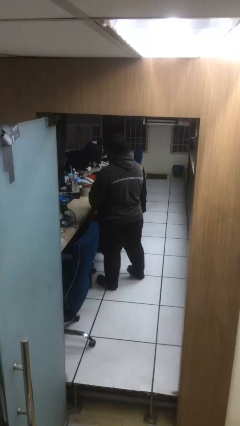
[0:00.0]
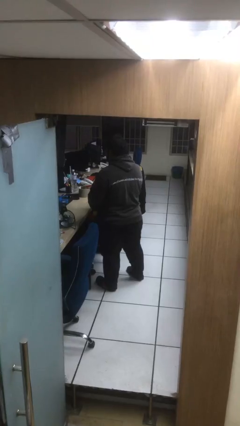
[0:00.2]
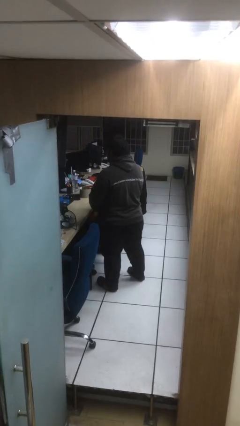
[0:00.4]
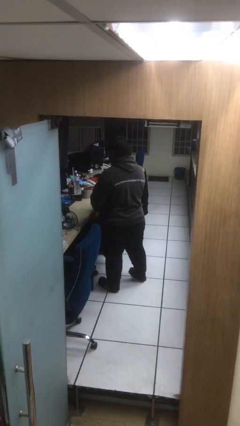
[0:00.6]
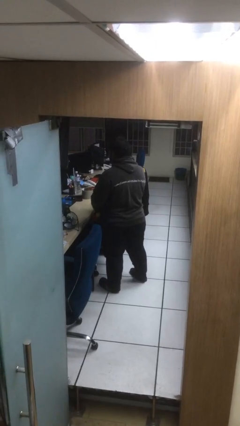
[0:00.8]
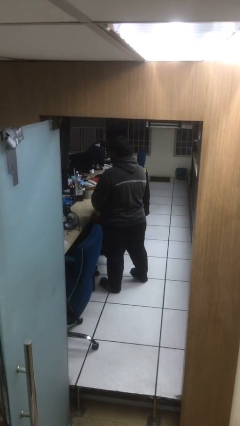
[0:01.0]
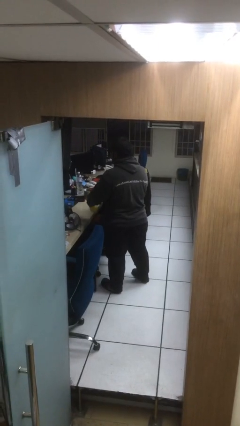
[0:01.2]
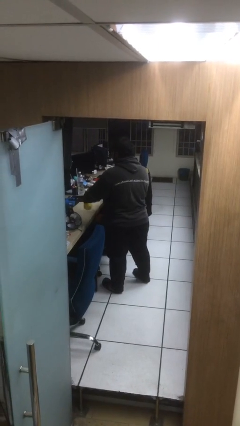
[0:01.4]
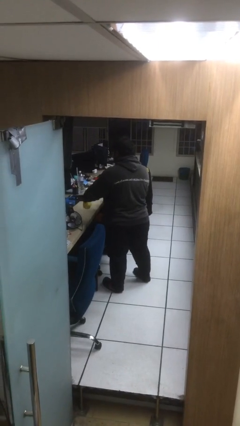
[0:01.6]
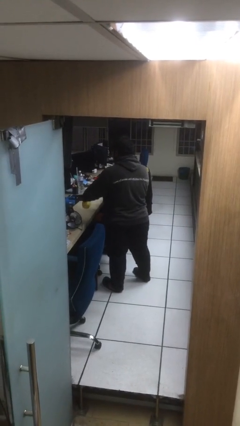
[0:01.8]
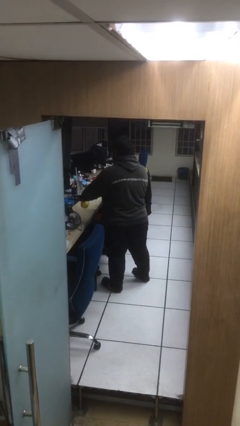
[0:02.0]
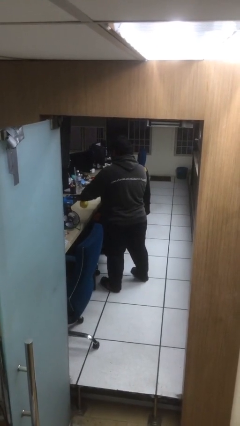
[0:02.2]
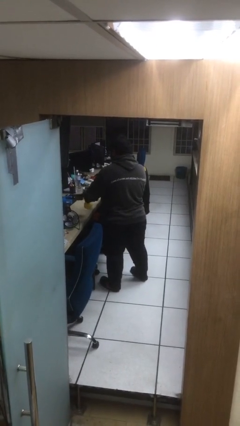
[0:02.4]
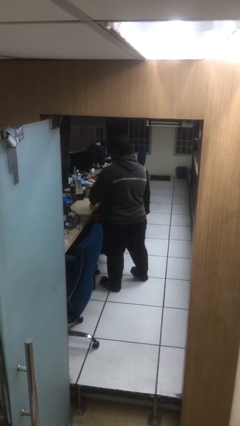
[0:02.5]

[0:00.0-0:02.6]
person sprays from bottle

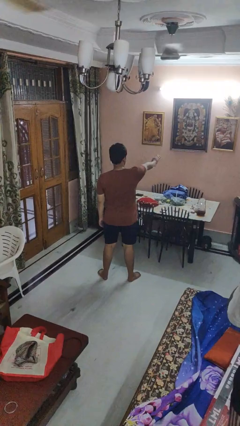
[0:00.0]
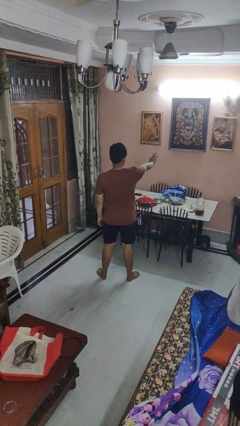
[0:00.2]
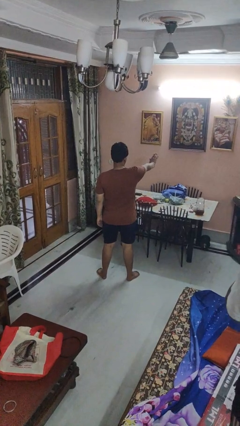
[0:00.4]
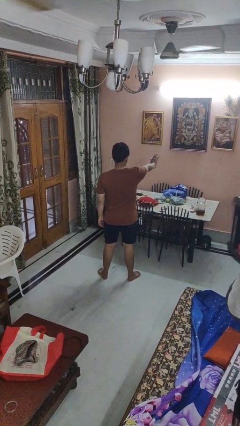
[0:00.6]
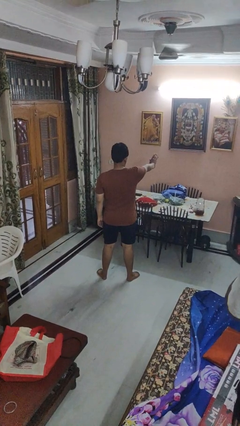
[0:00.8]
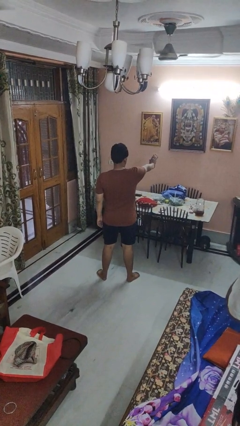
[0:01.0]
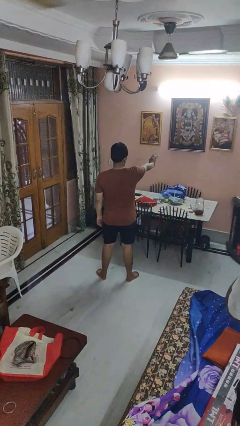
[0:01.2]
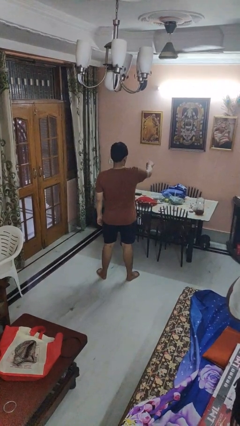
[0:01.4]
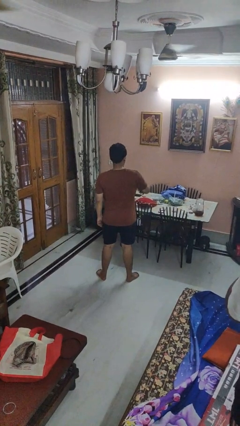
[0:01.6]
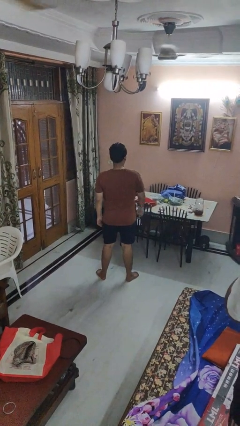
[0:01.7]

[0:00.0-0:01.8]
person gestures stop

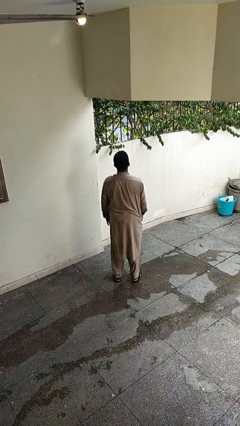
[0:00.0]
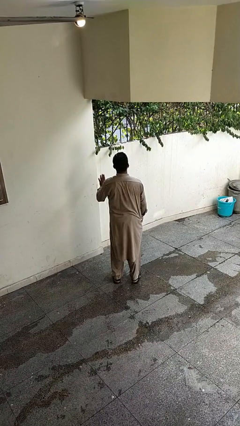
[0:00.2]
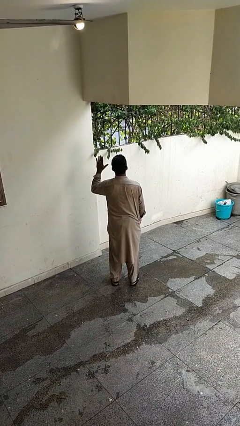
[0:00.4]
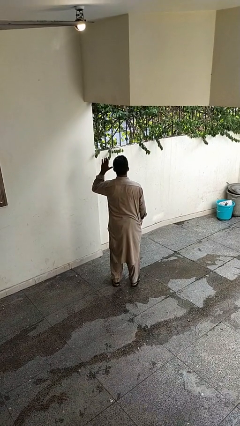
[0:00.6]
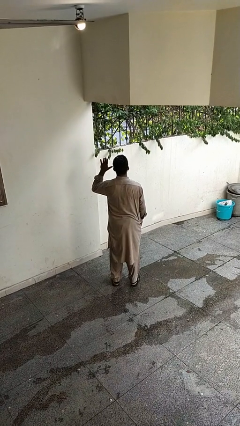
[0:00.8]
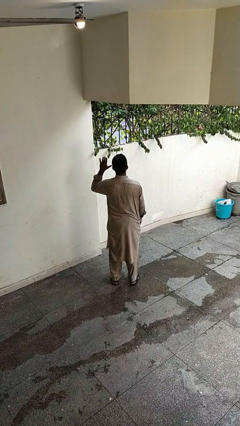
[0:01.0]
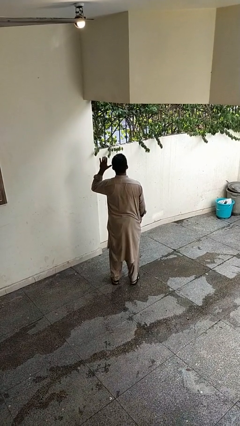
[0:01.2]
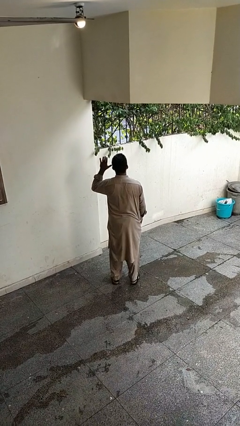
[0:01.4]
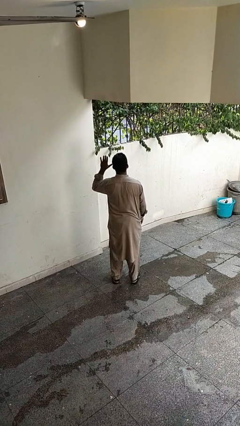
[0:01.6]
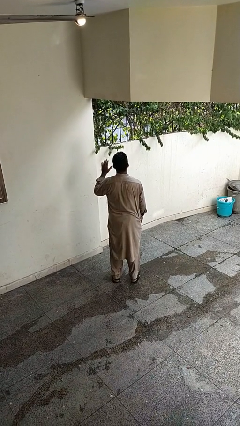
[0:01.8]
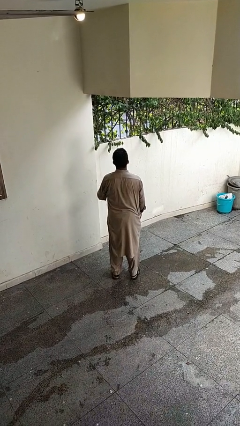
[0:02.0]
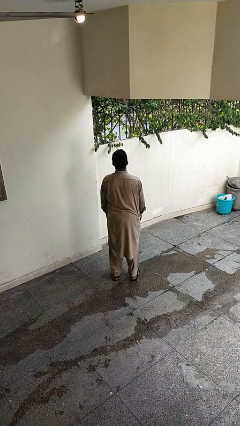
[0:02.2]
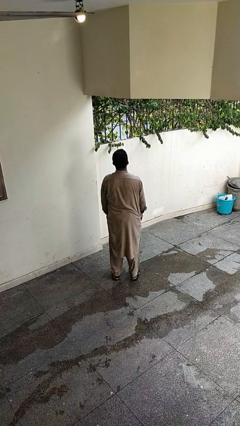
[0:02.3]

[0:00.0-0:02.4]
person gestures number five

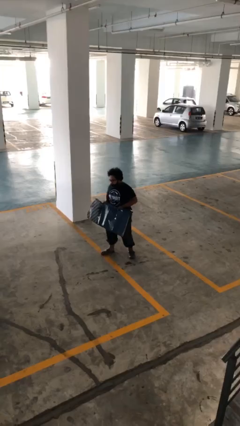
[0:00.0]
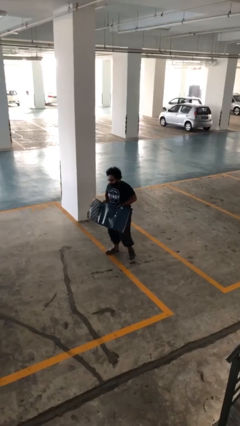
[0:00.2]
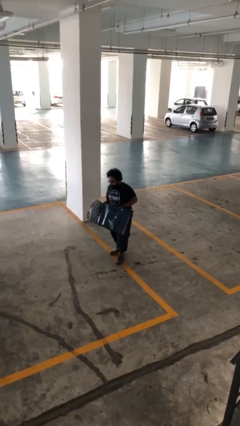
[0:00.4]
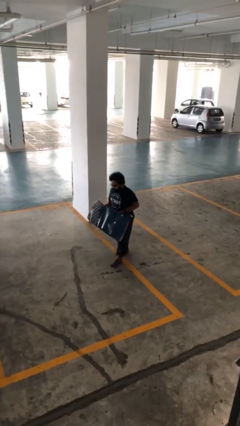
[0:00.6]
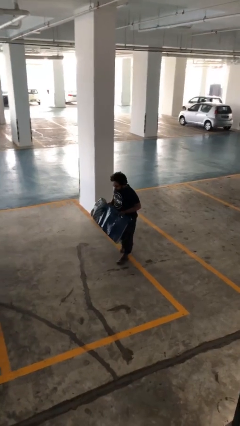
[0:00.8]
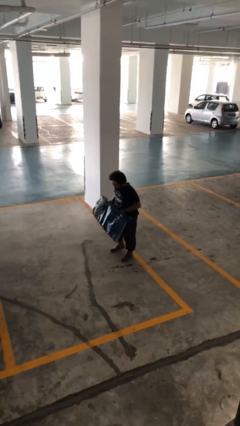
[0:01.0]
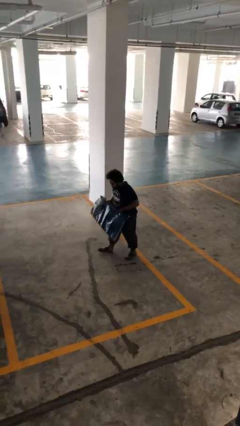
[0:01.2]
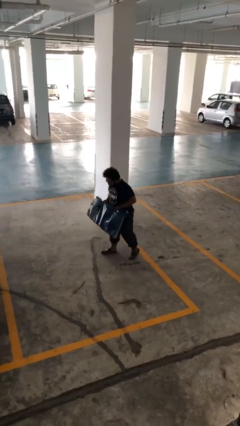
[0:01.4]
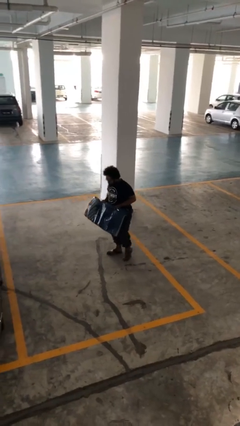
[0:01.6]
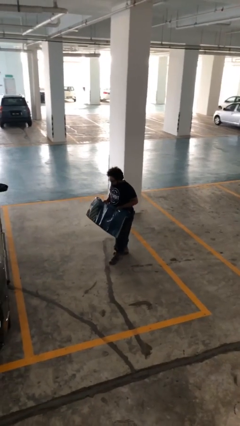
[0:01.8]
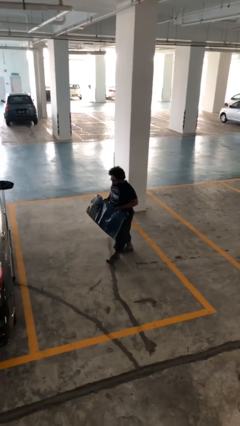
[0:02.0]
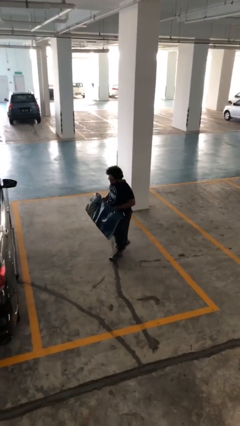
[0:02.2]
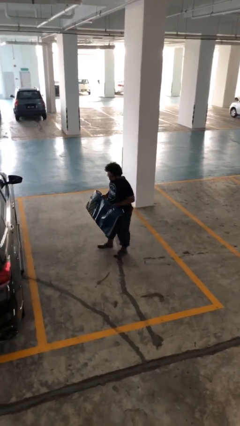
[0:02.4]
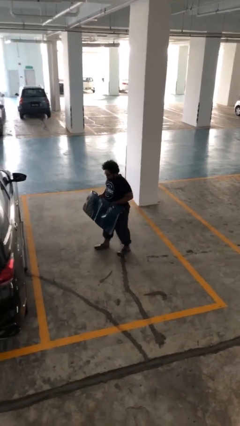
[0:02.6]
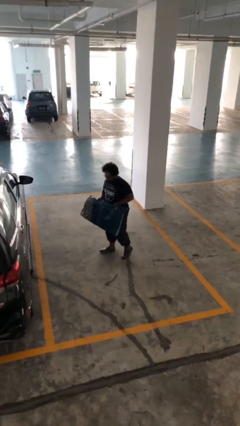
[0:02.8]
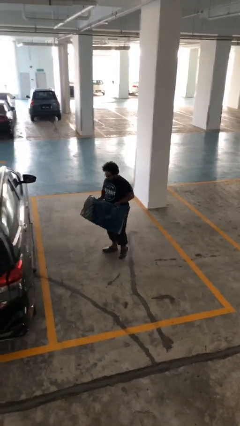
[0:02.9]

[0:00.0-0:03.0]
person carries heavy object

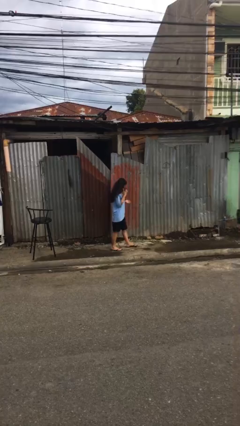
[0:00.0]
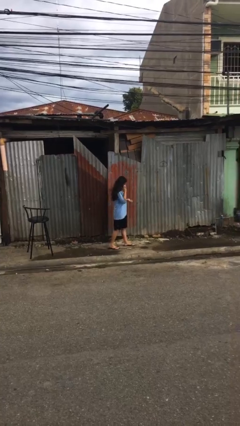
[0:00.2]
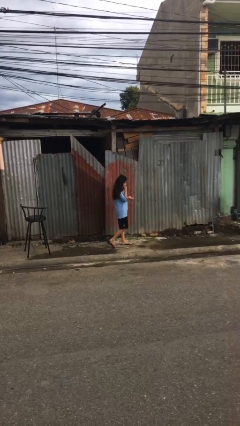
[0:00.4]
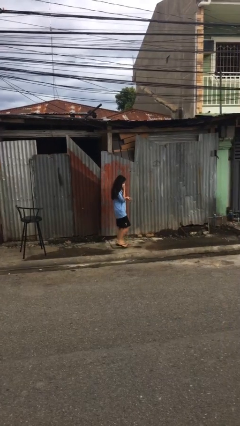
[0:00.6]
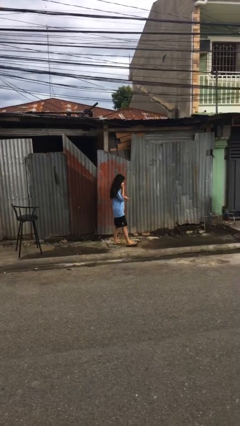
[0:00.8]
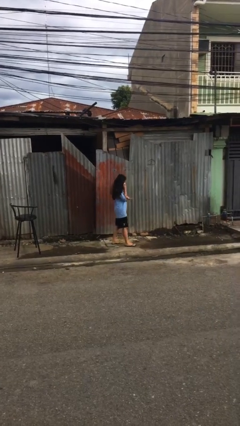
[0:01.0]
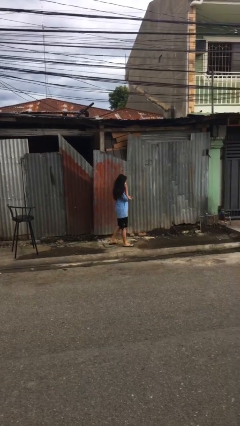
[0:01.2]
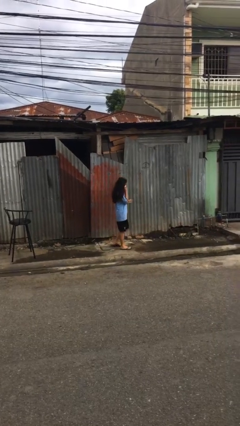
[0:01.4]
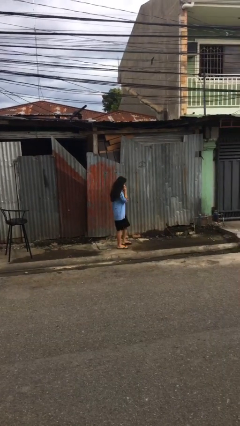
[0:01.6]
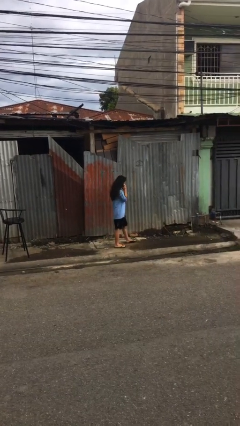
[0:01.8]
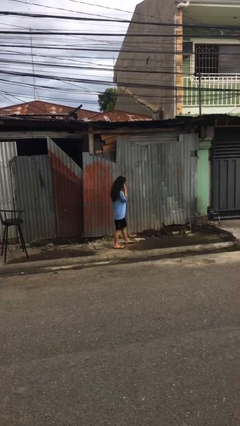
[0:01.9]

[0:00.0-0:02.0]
person talks on phone

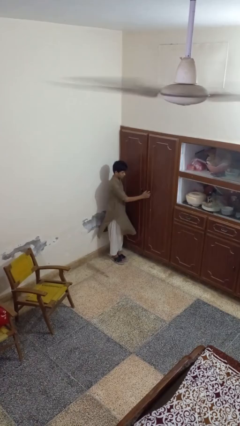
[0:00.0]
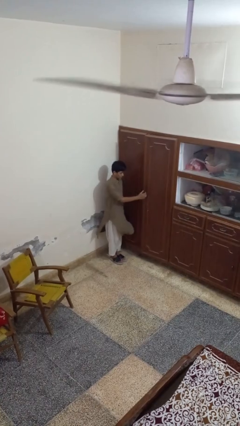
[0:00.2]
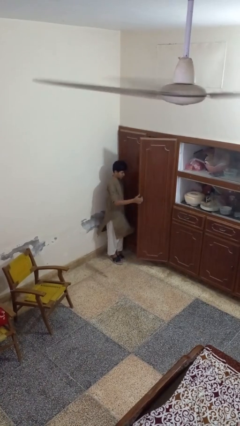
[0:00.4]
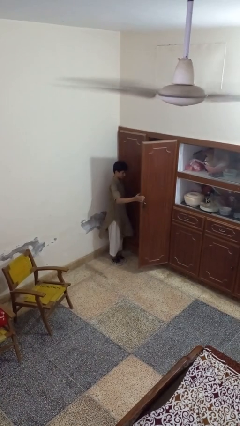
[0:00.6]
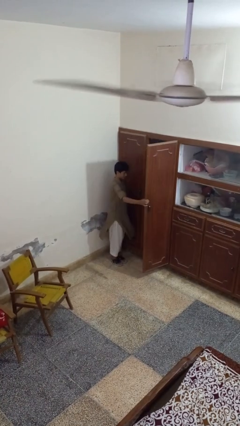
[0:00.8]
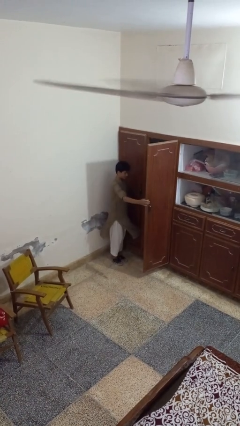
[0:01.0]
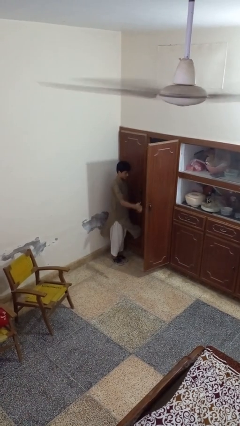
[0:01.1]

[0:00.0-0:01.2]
person opens closet door

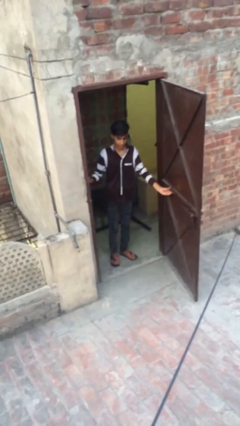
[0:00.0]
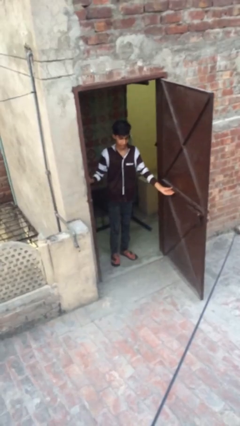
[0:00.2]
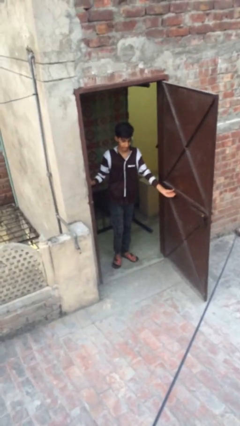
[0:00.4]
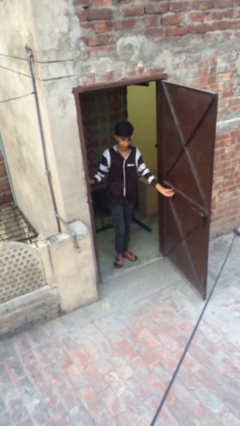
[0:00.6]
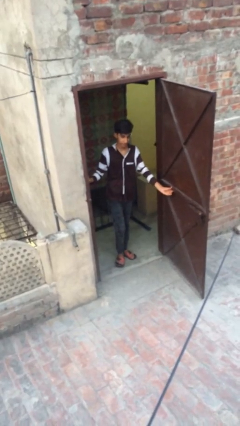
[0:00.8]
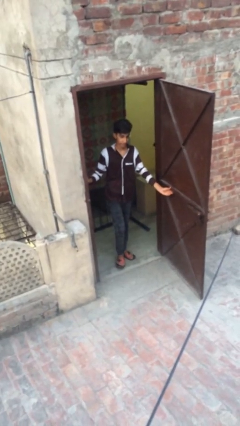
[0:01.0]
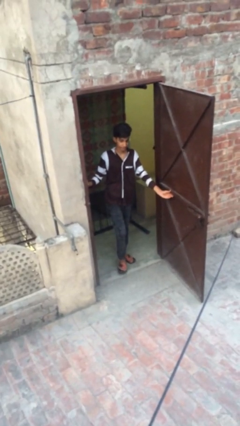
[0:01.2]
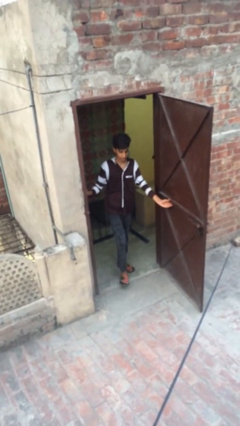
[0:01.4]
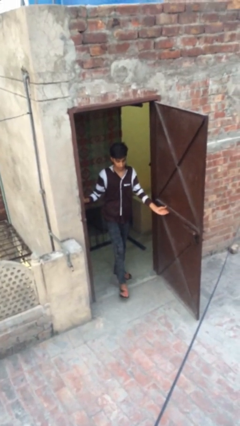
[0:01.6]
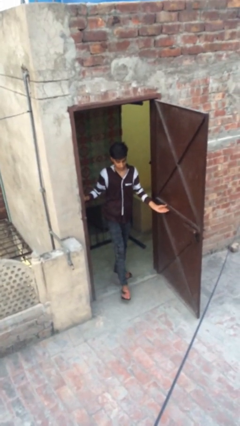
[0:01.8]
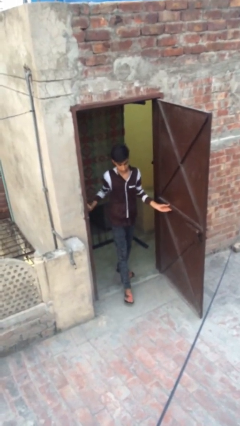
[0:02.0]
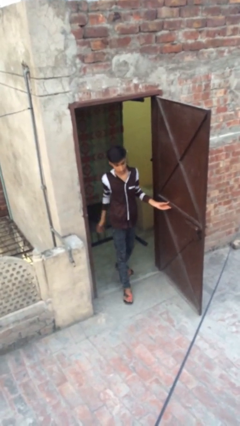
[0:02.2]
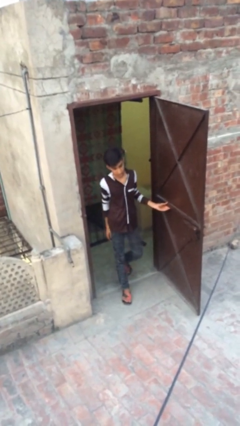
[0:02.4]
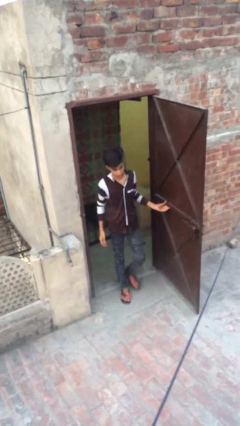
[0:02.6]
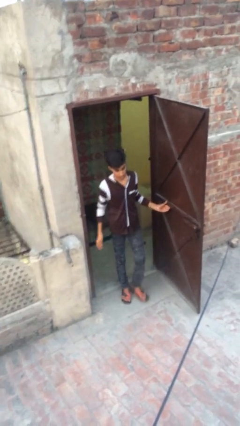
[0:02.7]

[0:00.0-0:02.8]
person opens facility door

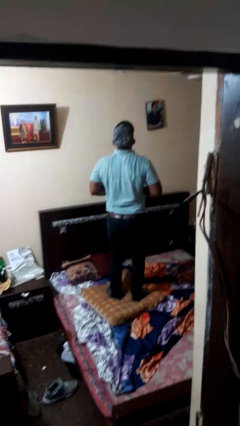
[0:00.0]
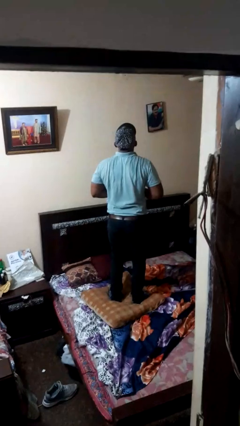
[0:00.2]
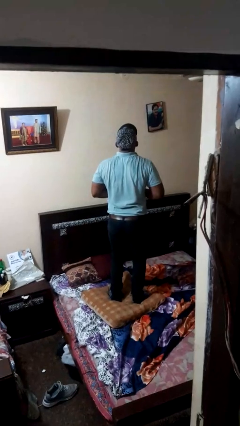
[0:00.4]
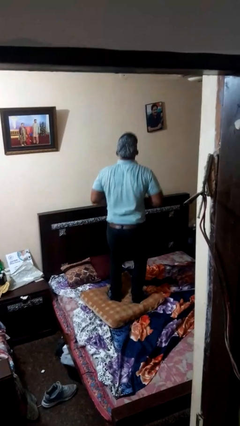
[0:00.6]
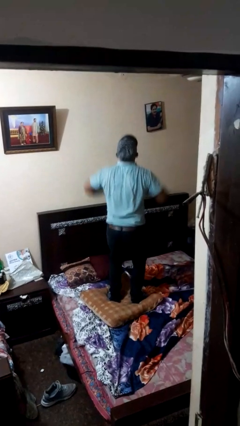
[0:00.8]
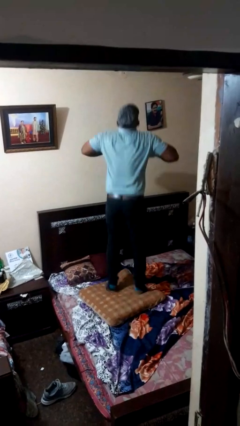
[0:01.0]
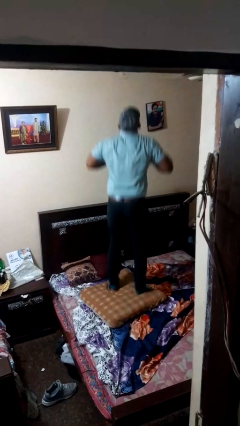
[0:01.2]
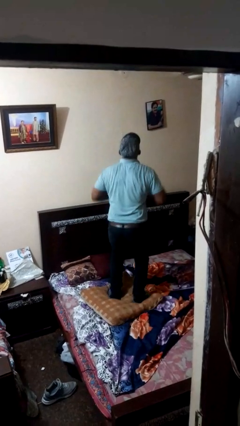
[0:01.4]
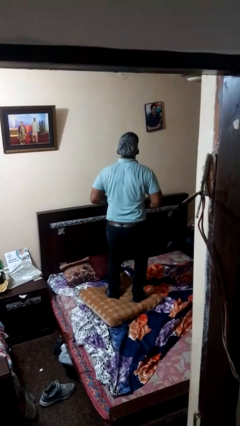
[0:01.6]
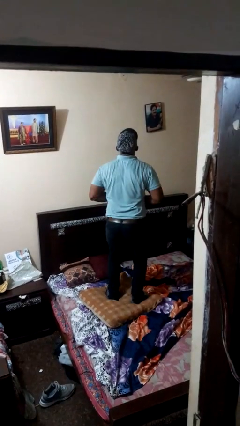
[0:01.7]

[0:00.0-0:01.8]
person jumps on bed
